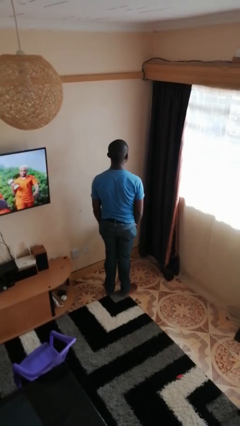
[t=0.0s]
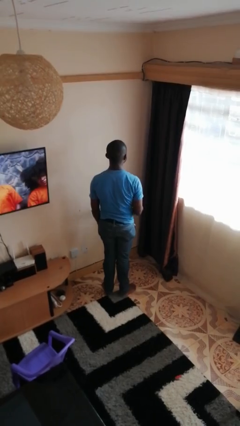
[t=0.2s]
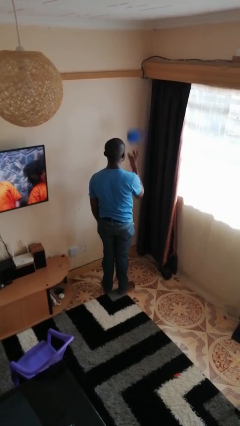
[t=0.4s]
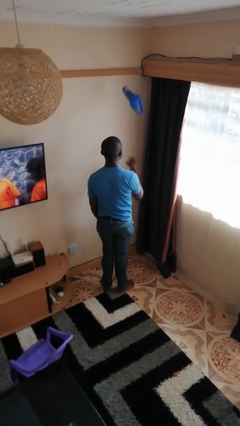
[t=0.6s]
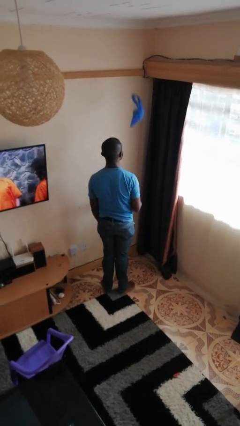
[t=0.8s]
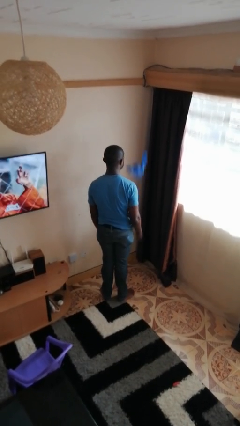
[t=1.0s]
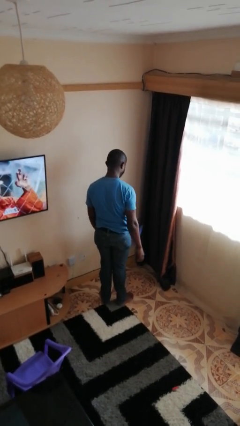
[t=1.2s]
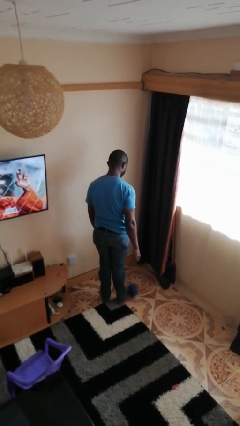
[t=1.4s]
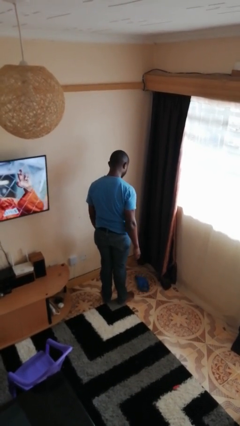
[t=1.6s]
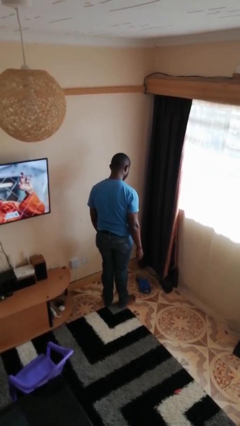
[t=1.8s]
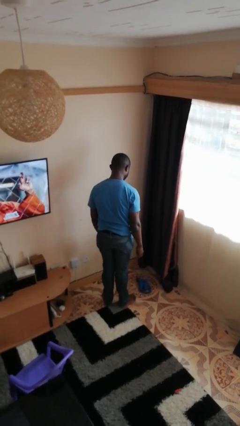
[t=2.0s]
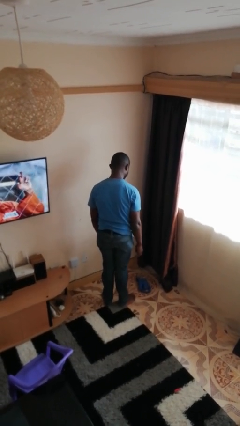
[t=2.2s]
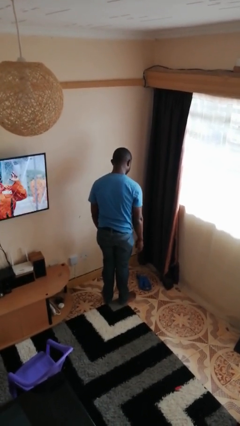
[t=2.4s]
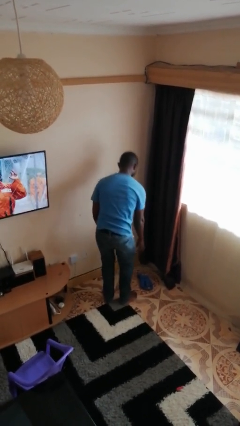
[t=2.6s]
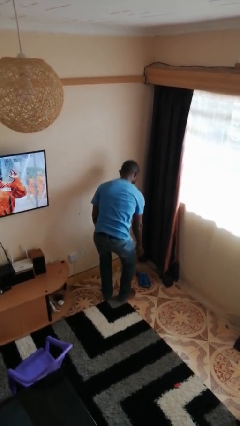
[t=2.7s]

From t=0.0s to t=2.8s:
person throws object into air

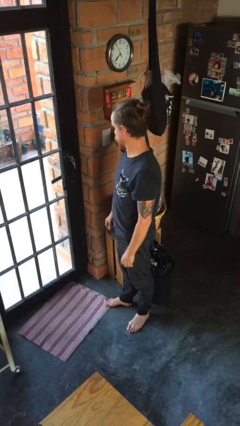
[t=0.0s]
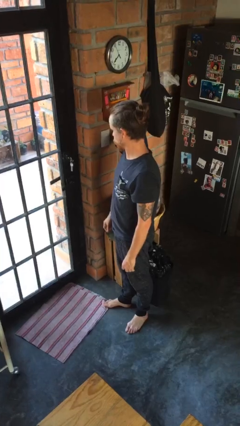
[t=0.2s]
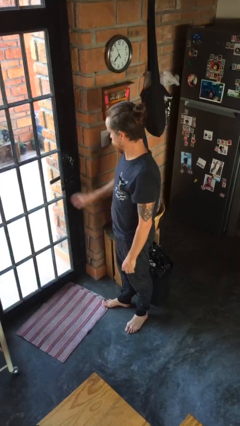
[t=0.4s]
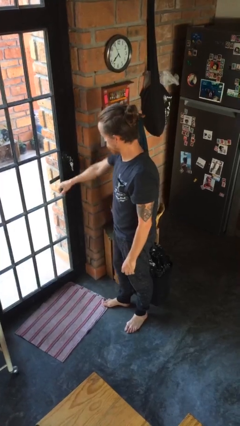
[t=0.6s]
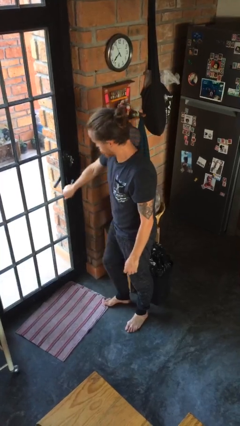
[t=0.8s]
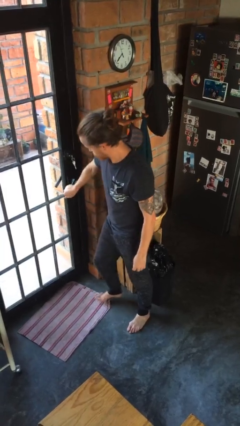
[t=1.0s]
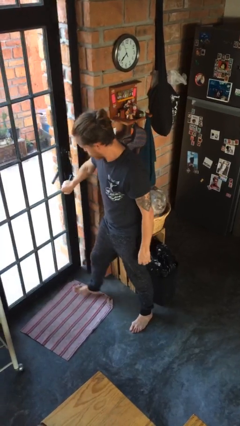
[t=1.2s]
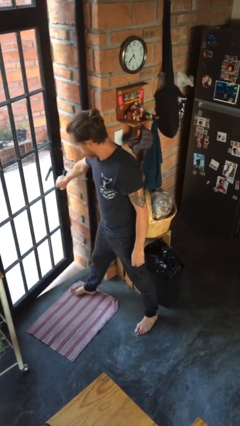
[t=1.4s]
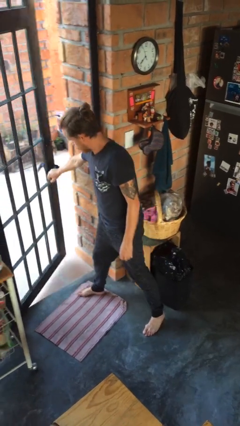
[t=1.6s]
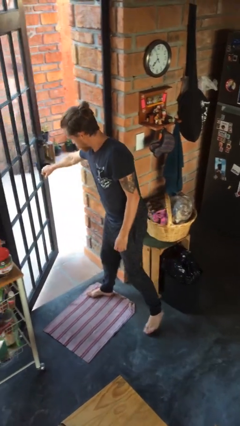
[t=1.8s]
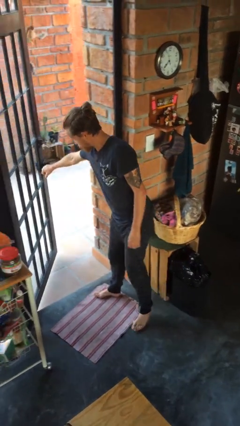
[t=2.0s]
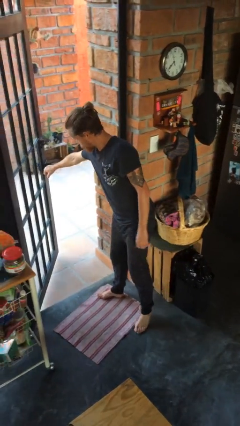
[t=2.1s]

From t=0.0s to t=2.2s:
person opens facility door

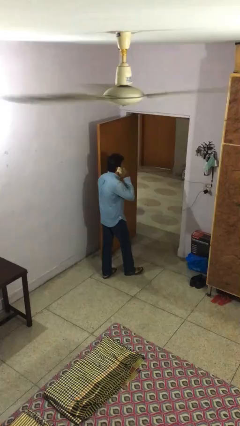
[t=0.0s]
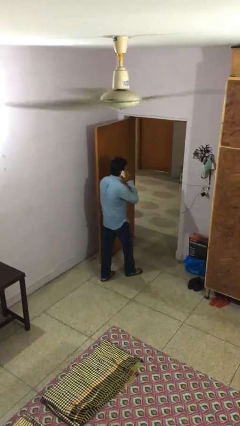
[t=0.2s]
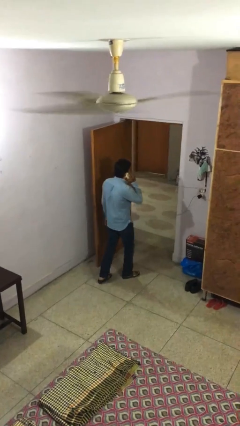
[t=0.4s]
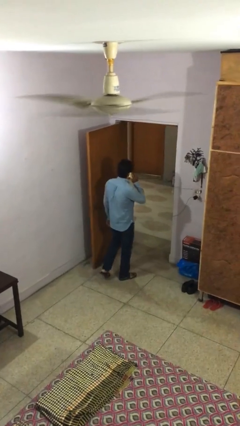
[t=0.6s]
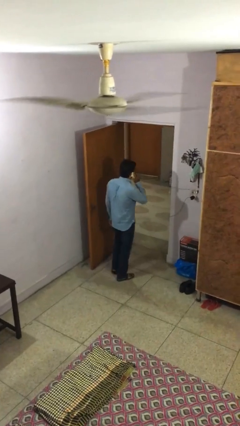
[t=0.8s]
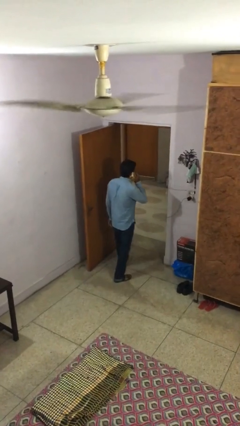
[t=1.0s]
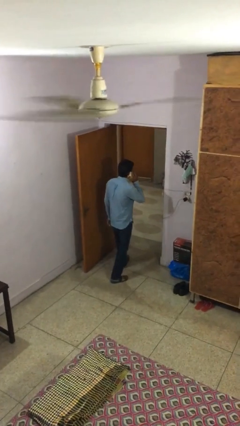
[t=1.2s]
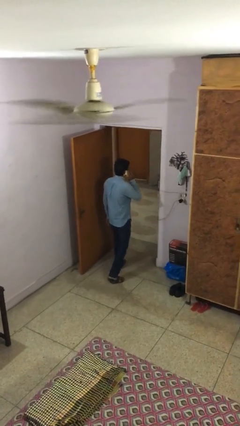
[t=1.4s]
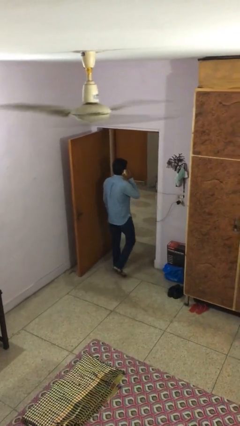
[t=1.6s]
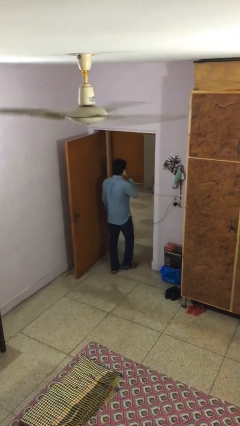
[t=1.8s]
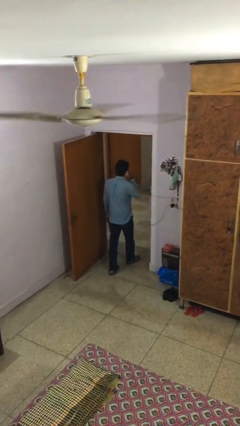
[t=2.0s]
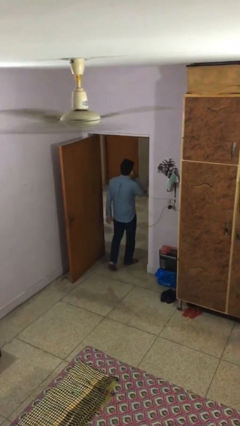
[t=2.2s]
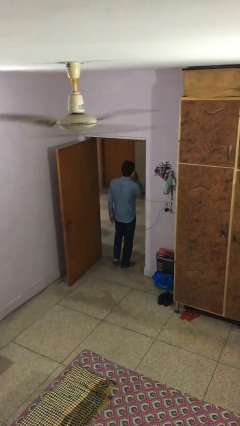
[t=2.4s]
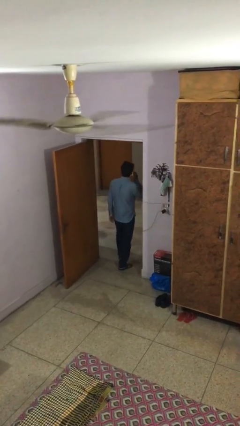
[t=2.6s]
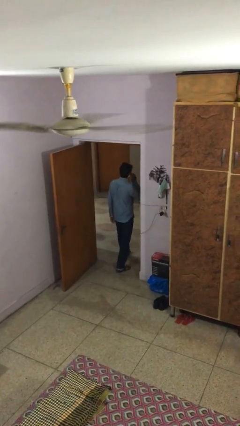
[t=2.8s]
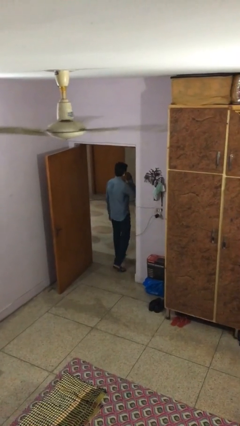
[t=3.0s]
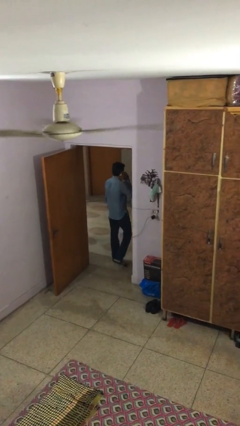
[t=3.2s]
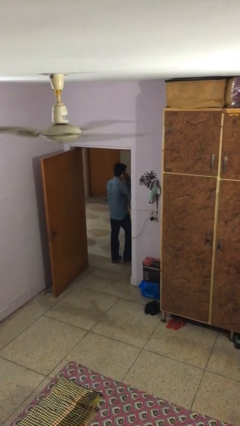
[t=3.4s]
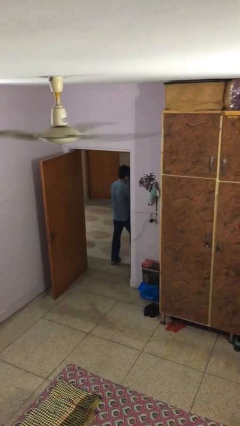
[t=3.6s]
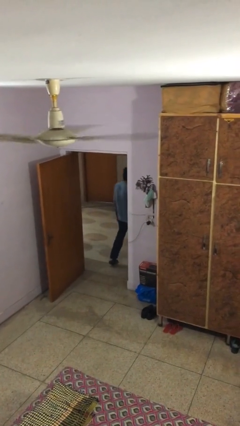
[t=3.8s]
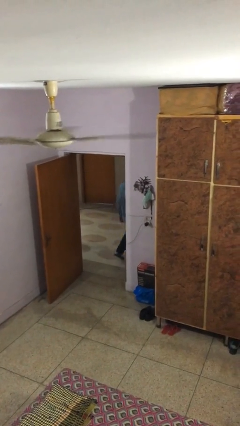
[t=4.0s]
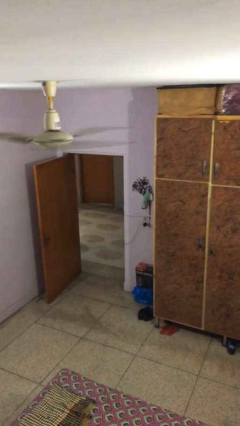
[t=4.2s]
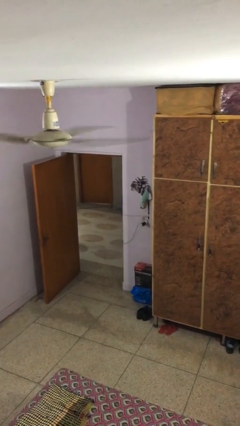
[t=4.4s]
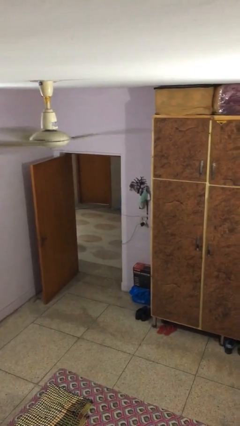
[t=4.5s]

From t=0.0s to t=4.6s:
person exits scene through structure

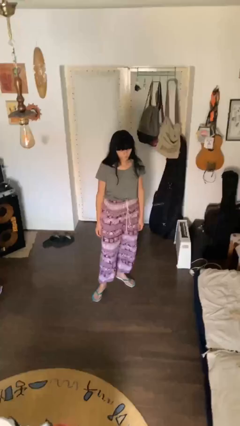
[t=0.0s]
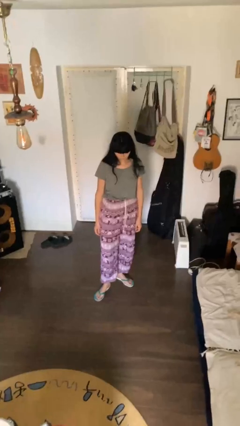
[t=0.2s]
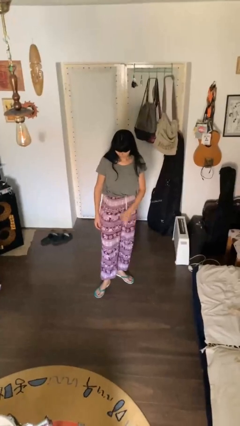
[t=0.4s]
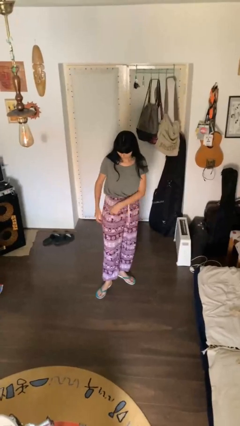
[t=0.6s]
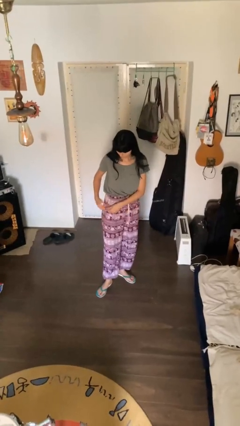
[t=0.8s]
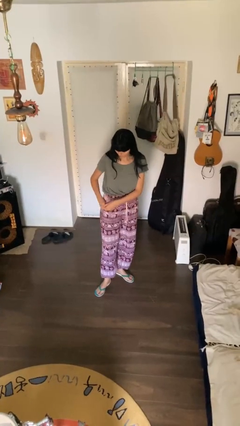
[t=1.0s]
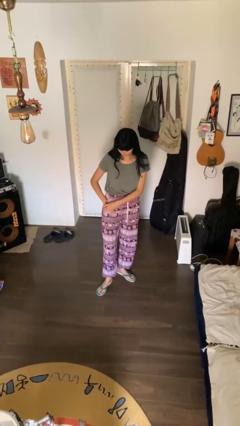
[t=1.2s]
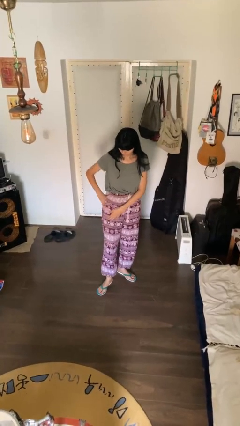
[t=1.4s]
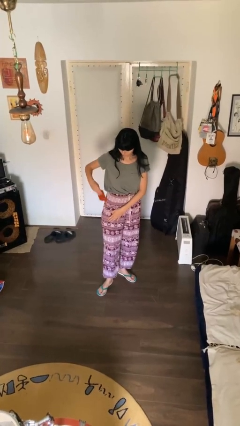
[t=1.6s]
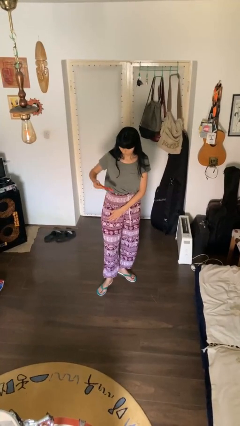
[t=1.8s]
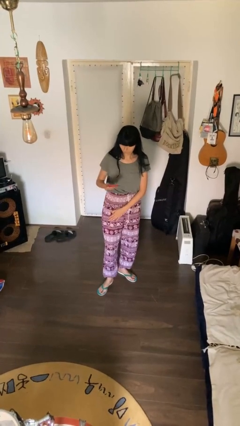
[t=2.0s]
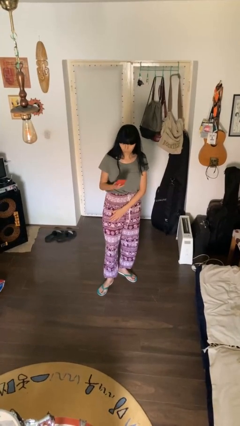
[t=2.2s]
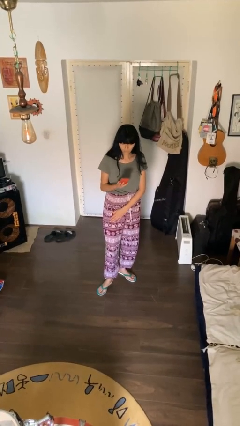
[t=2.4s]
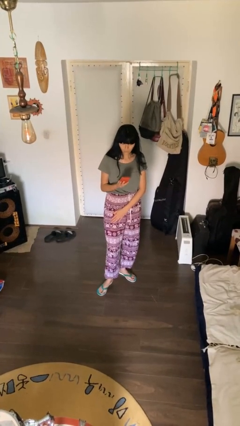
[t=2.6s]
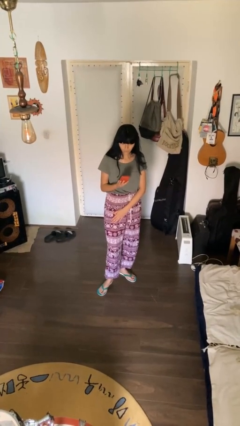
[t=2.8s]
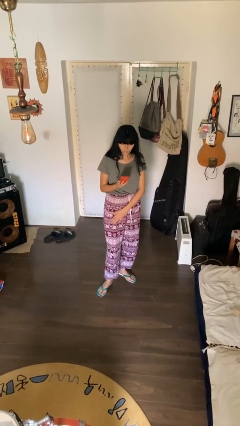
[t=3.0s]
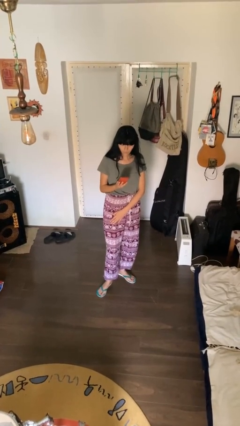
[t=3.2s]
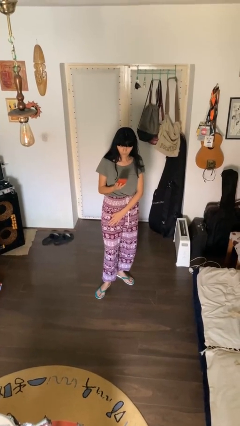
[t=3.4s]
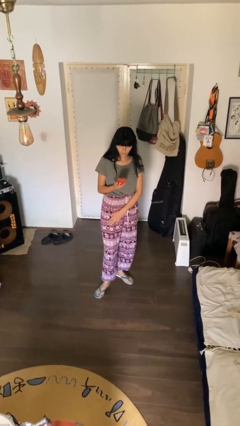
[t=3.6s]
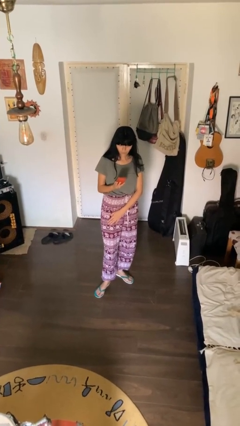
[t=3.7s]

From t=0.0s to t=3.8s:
person takes phone from pocket

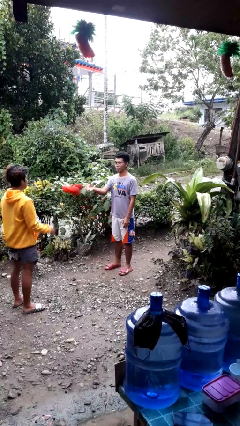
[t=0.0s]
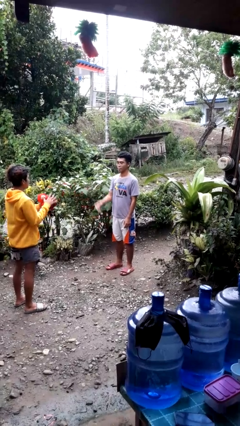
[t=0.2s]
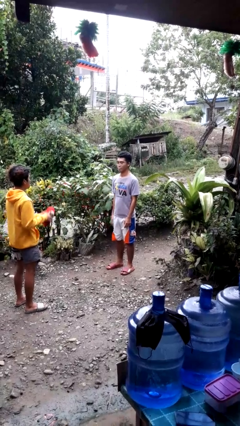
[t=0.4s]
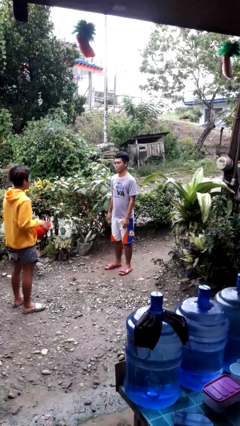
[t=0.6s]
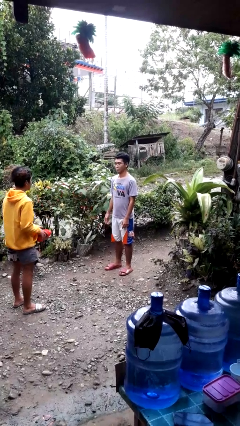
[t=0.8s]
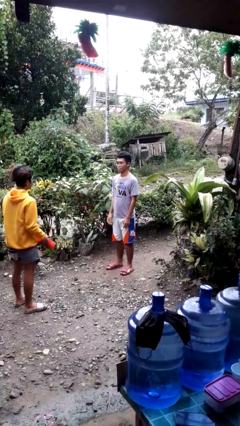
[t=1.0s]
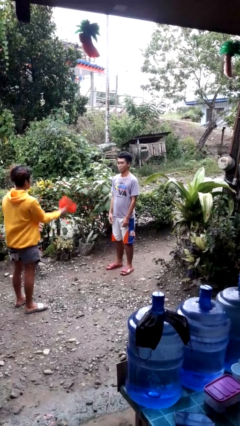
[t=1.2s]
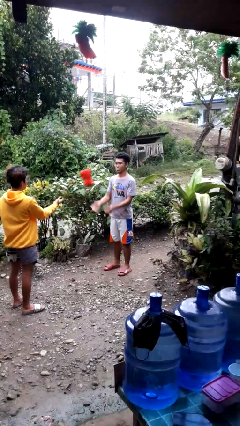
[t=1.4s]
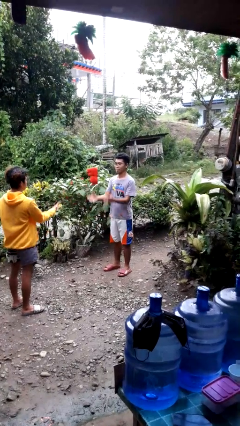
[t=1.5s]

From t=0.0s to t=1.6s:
person throws object to person

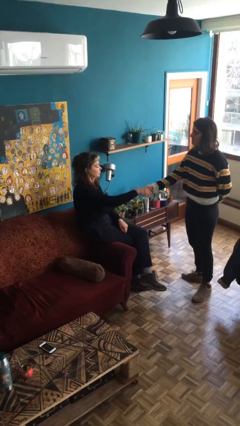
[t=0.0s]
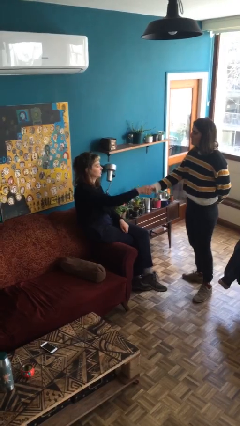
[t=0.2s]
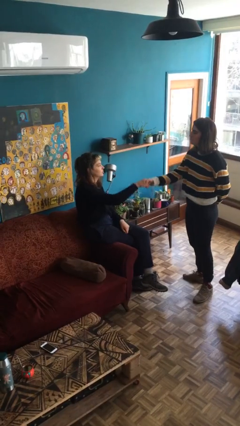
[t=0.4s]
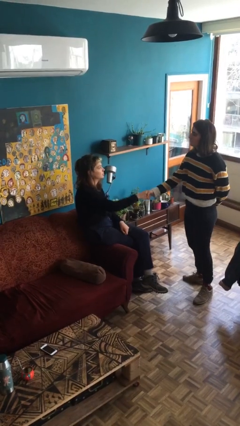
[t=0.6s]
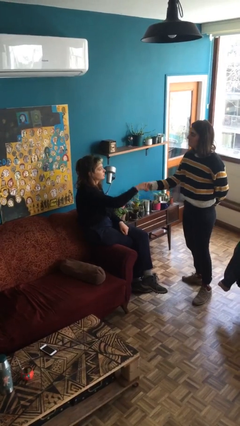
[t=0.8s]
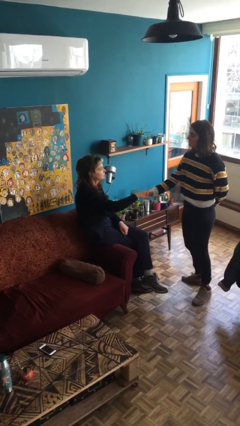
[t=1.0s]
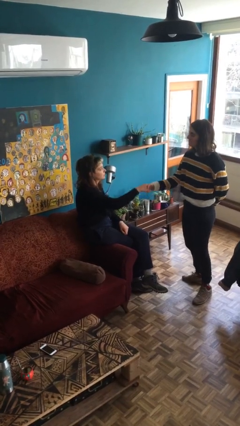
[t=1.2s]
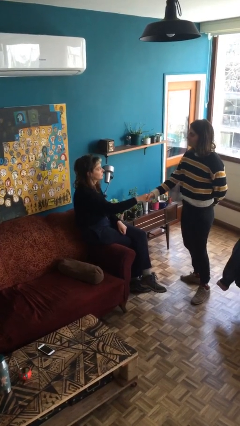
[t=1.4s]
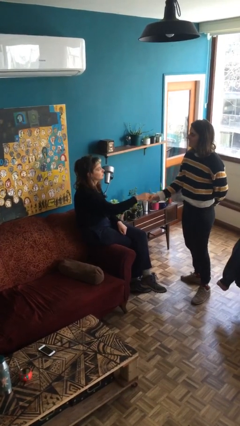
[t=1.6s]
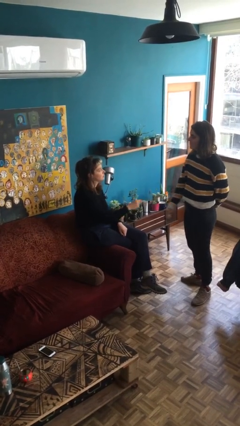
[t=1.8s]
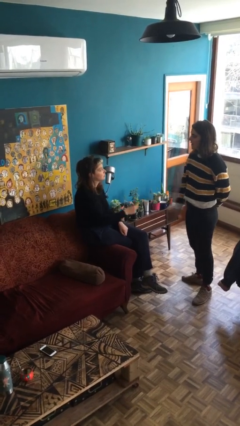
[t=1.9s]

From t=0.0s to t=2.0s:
person shakes hand
